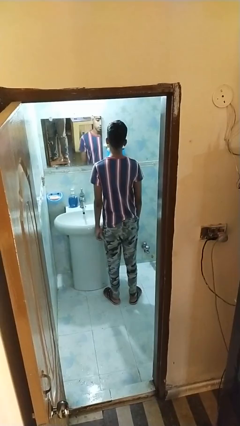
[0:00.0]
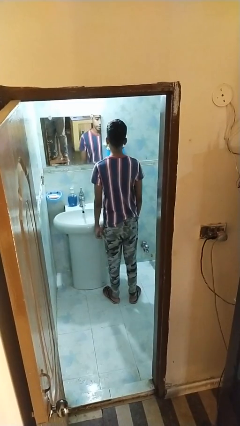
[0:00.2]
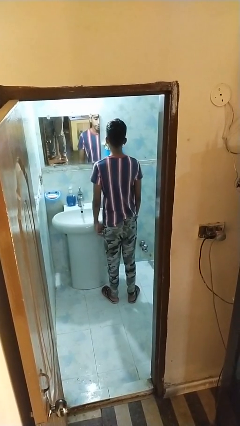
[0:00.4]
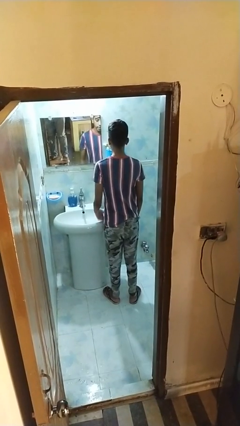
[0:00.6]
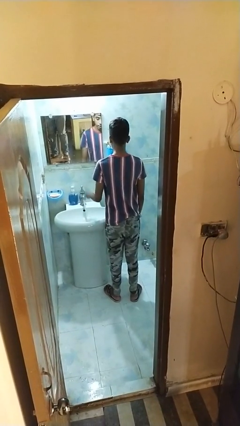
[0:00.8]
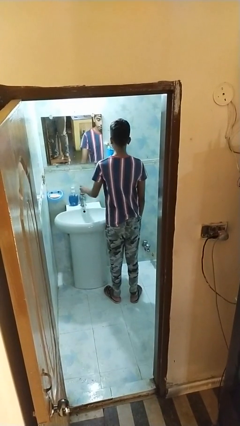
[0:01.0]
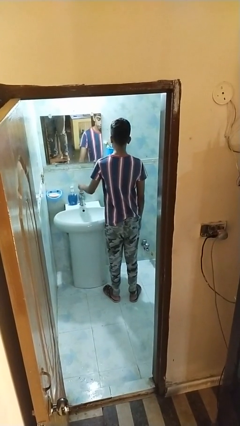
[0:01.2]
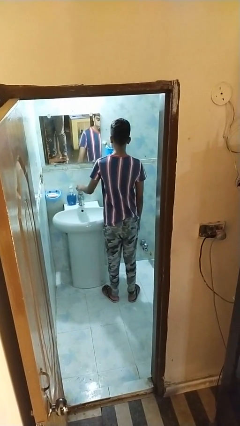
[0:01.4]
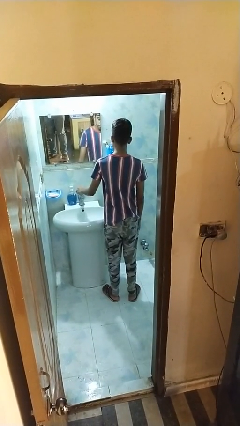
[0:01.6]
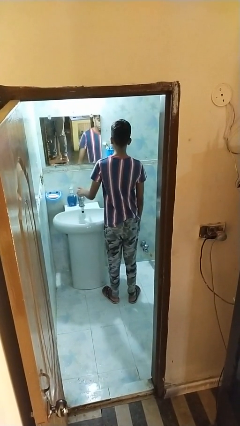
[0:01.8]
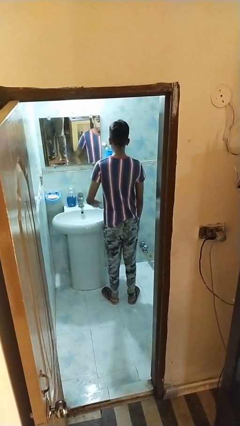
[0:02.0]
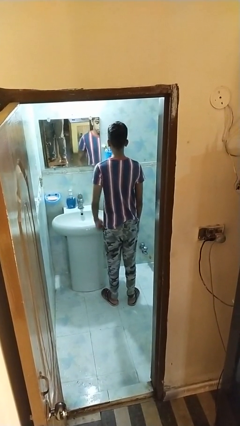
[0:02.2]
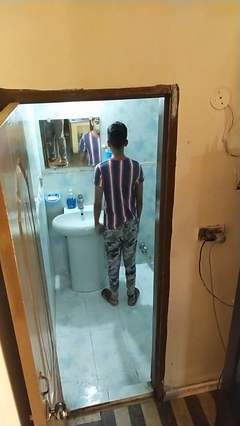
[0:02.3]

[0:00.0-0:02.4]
person turns off faucet

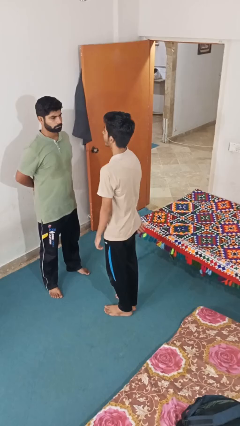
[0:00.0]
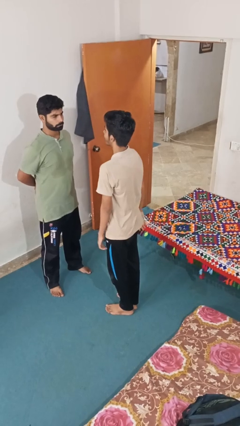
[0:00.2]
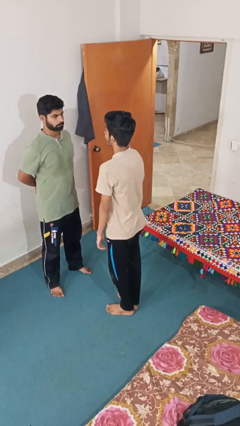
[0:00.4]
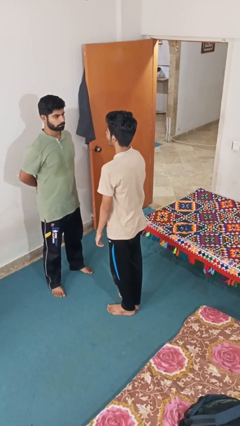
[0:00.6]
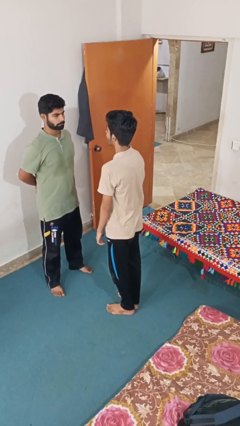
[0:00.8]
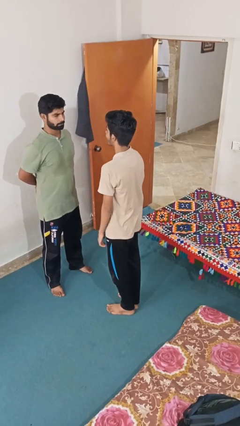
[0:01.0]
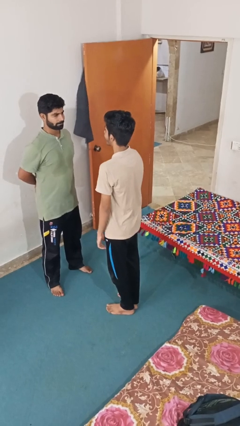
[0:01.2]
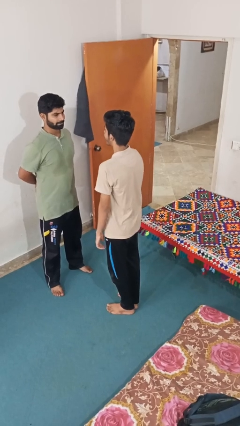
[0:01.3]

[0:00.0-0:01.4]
person touches face of person

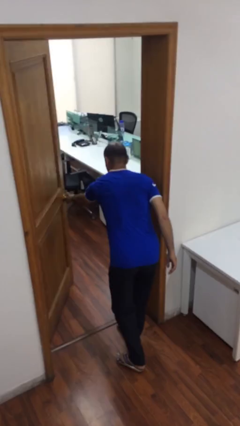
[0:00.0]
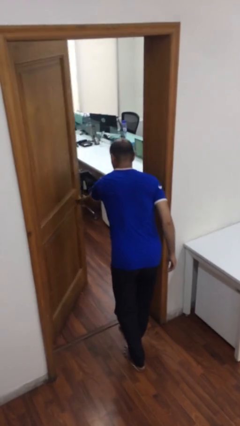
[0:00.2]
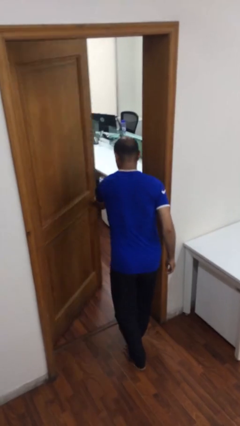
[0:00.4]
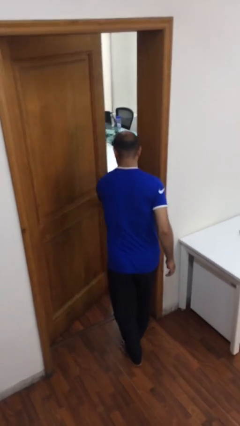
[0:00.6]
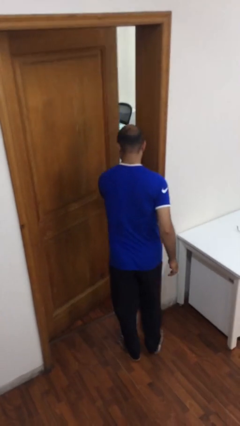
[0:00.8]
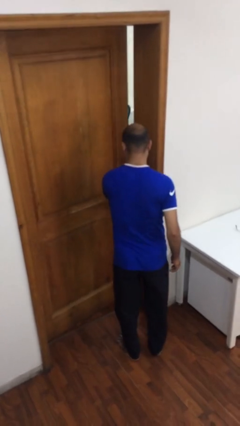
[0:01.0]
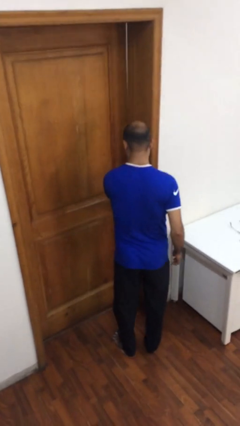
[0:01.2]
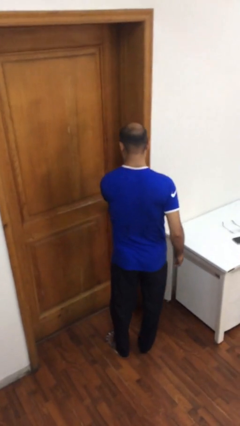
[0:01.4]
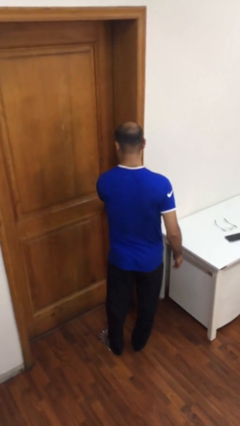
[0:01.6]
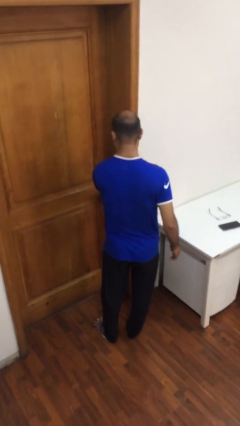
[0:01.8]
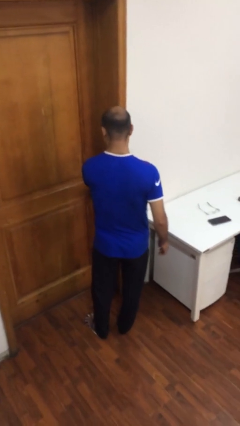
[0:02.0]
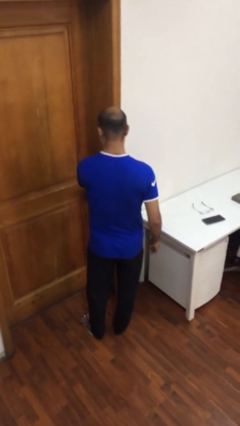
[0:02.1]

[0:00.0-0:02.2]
person closes facility door

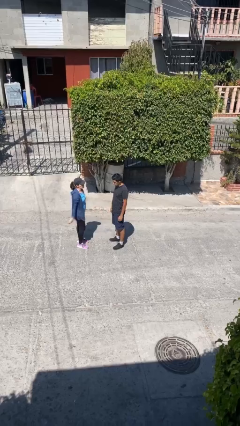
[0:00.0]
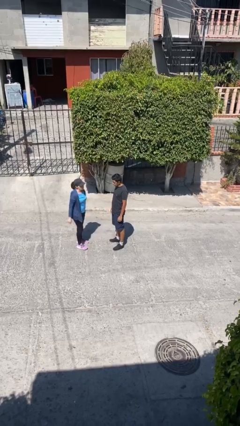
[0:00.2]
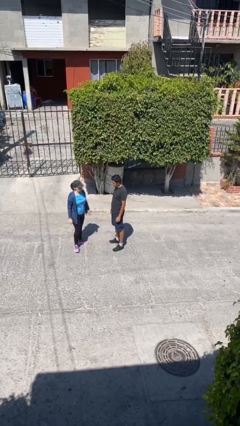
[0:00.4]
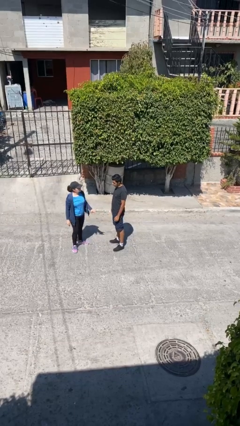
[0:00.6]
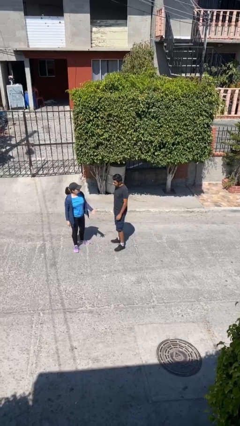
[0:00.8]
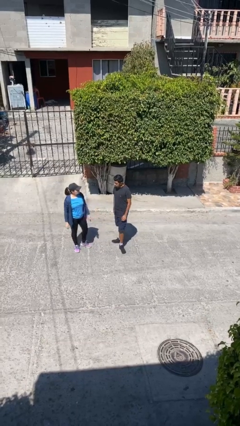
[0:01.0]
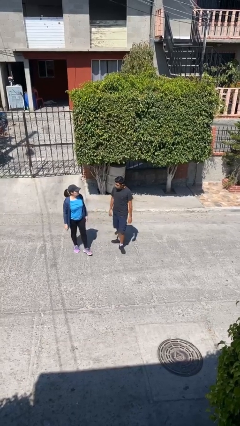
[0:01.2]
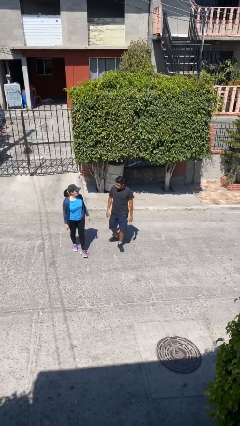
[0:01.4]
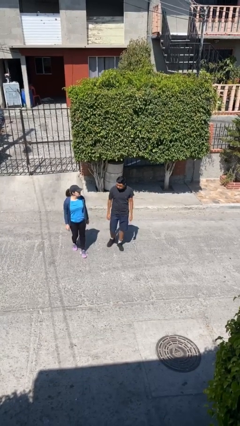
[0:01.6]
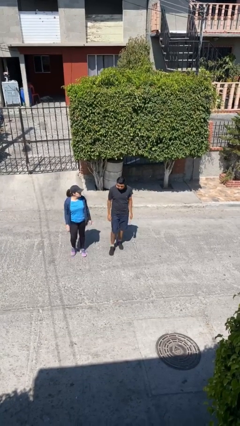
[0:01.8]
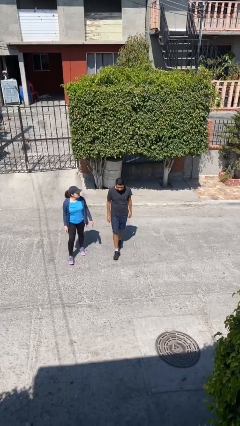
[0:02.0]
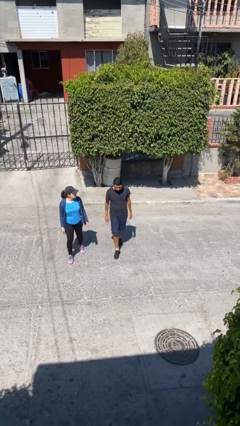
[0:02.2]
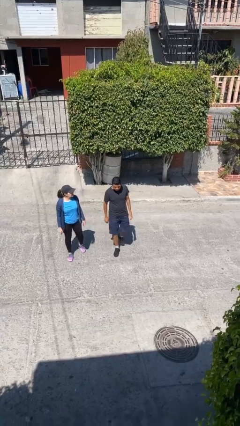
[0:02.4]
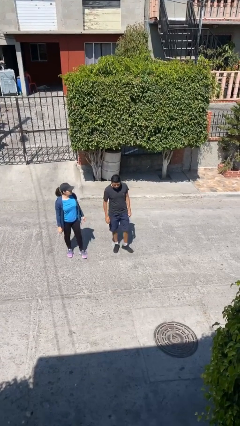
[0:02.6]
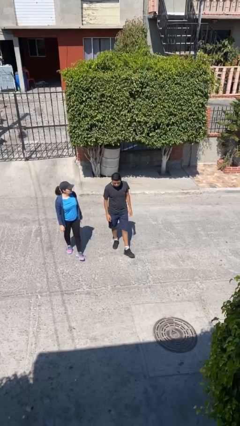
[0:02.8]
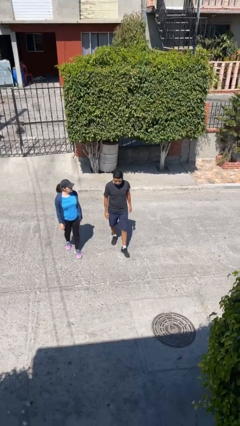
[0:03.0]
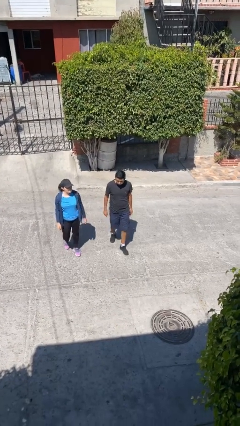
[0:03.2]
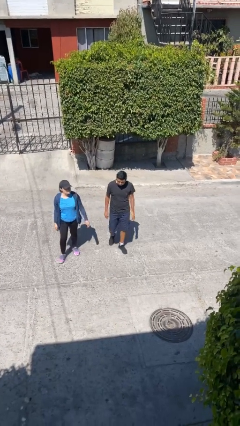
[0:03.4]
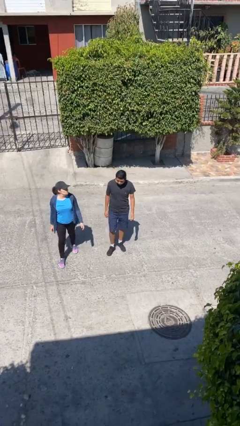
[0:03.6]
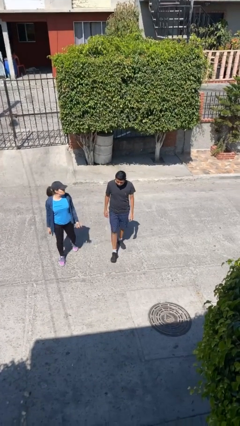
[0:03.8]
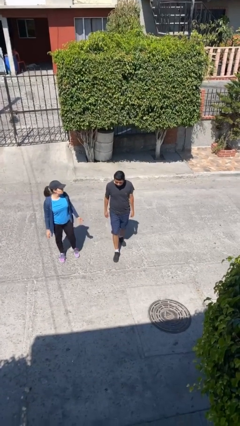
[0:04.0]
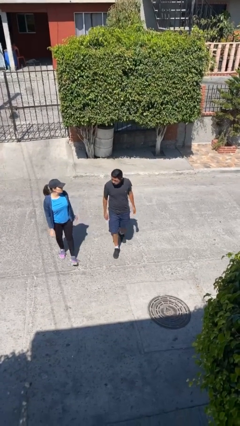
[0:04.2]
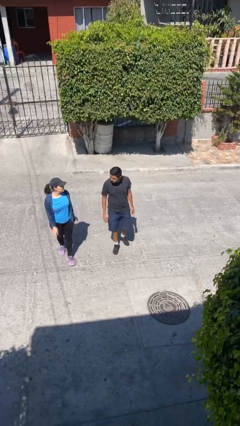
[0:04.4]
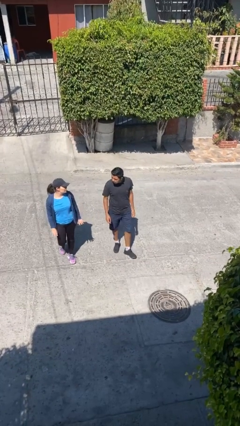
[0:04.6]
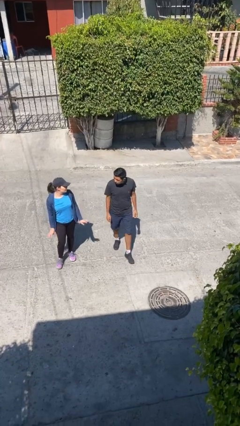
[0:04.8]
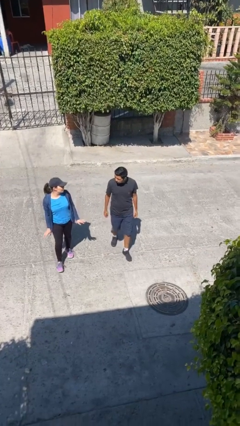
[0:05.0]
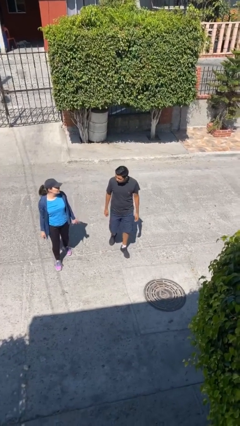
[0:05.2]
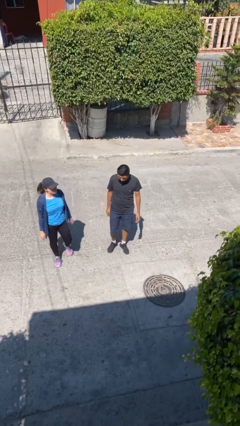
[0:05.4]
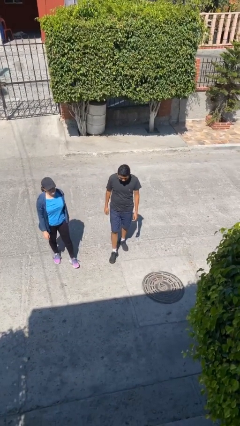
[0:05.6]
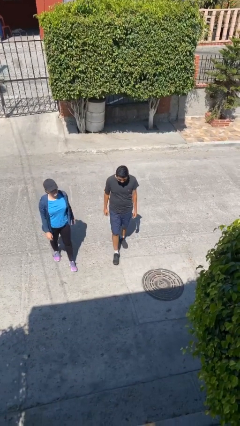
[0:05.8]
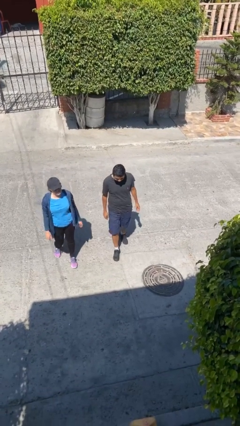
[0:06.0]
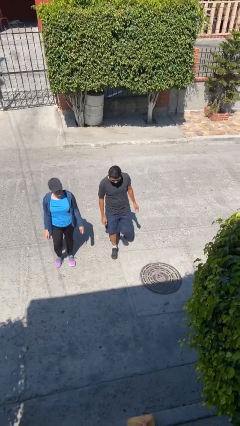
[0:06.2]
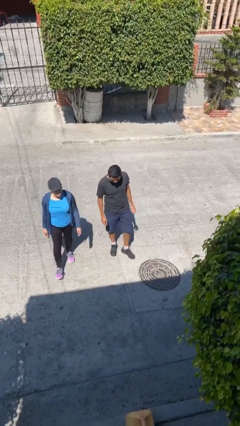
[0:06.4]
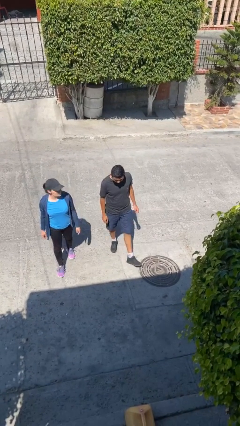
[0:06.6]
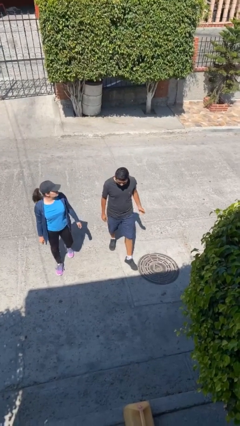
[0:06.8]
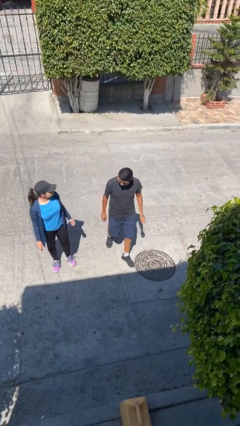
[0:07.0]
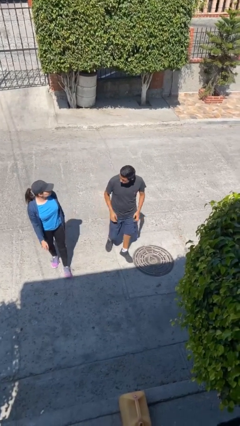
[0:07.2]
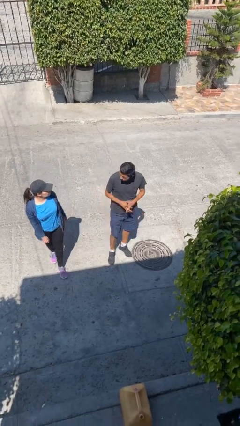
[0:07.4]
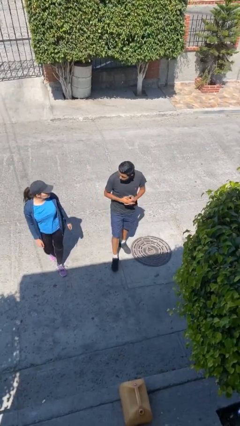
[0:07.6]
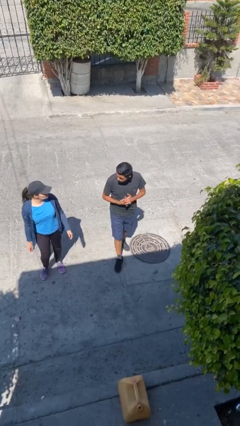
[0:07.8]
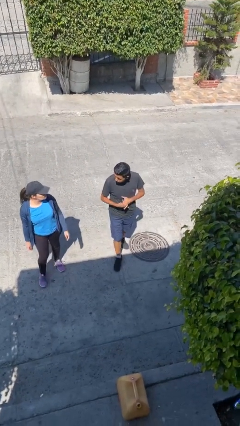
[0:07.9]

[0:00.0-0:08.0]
person talks to person

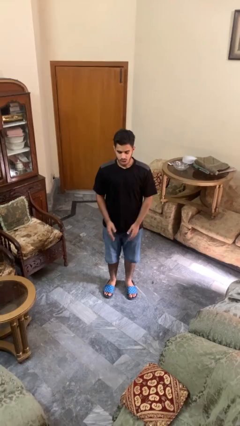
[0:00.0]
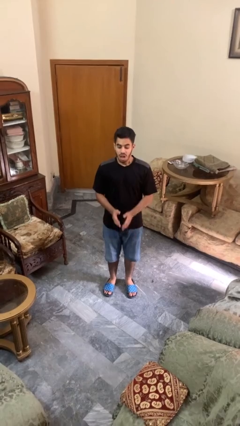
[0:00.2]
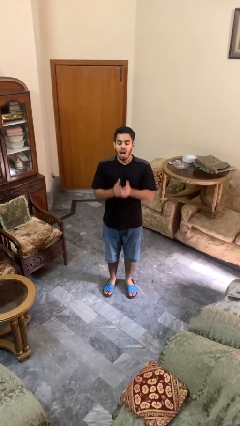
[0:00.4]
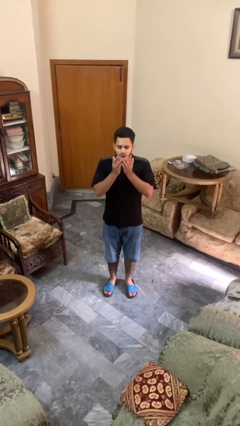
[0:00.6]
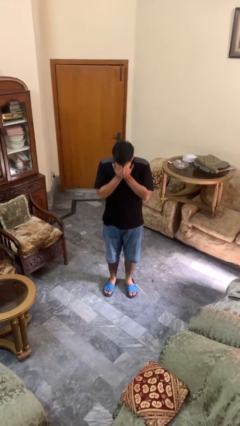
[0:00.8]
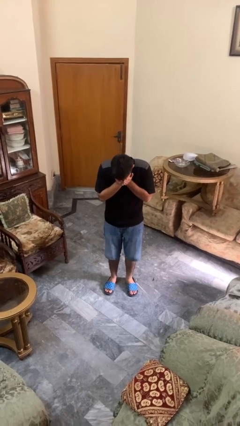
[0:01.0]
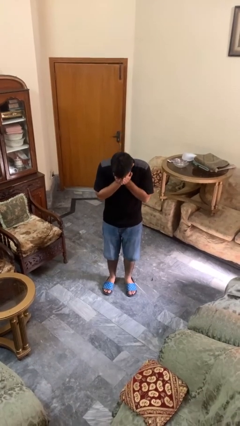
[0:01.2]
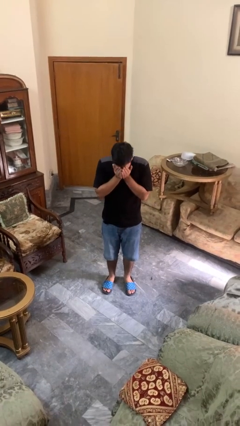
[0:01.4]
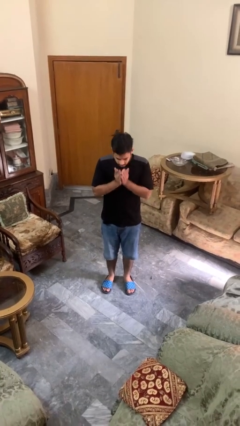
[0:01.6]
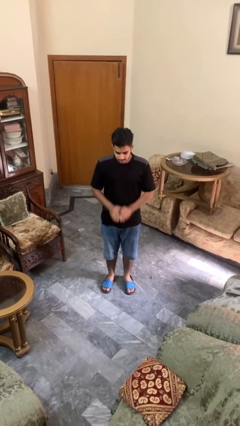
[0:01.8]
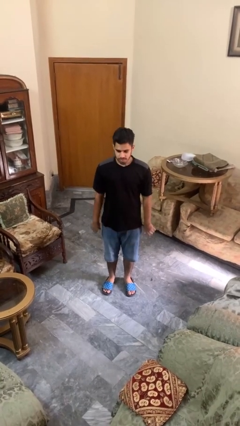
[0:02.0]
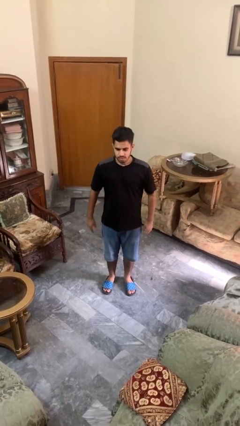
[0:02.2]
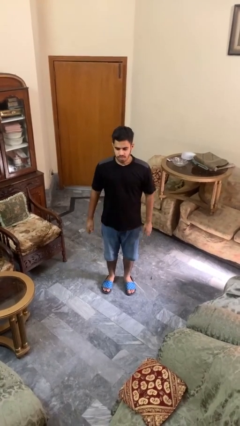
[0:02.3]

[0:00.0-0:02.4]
person sneezes into hand

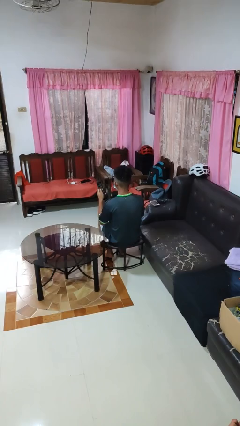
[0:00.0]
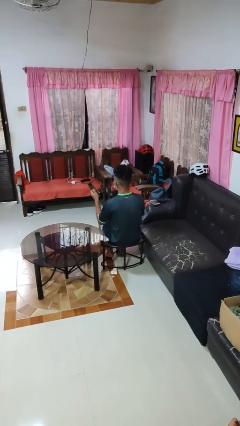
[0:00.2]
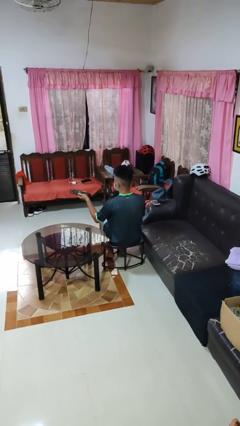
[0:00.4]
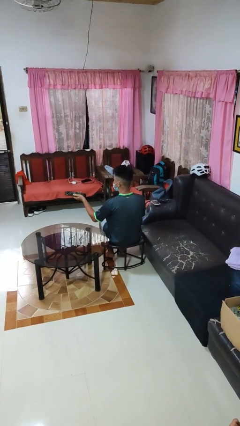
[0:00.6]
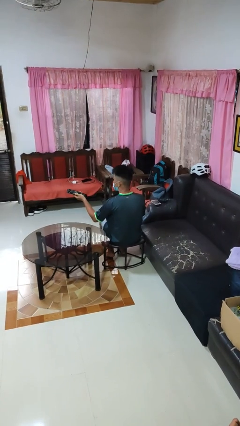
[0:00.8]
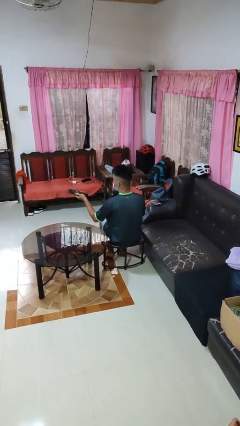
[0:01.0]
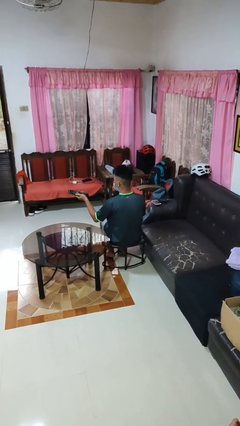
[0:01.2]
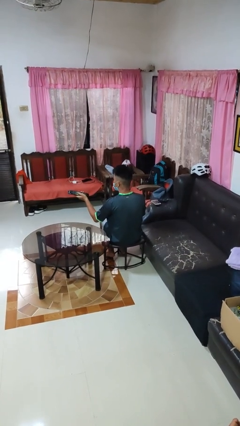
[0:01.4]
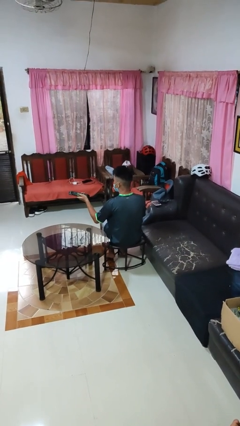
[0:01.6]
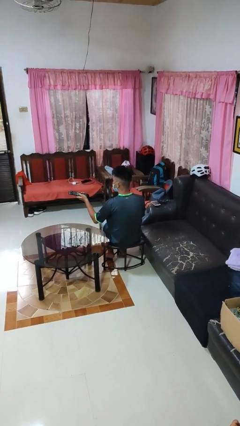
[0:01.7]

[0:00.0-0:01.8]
person uses television remote
